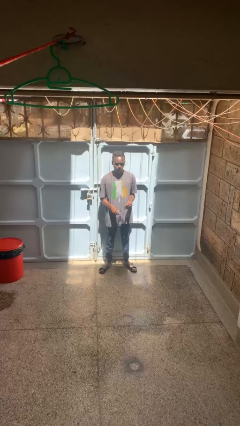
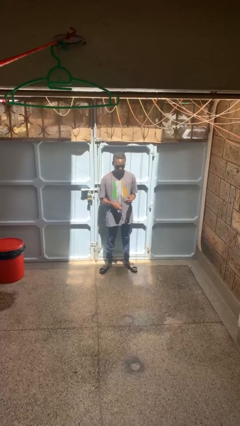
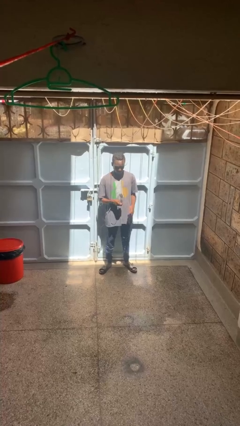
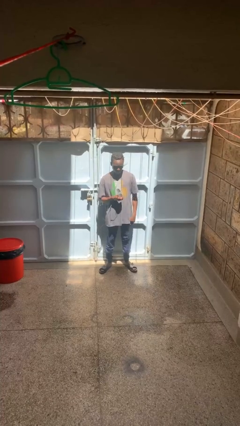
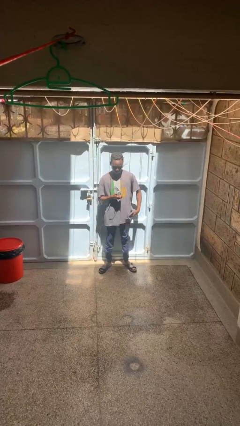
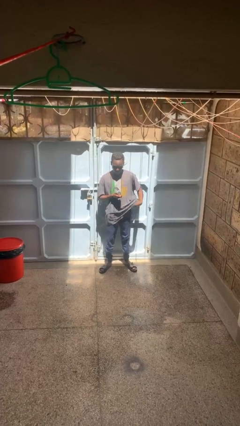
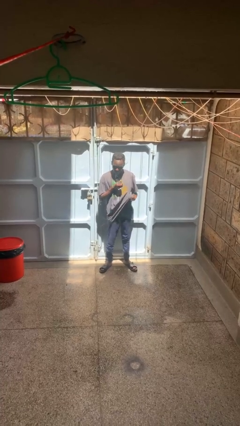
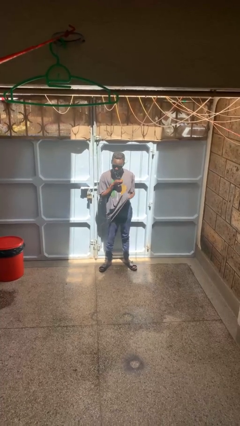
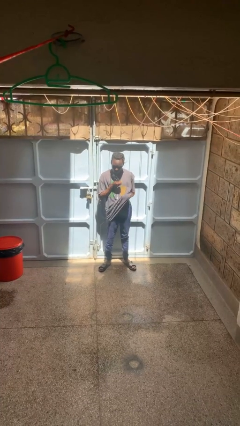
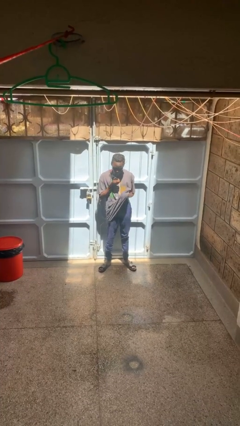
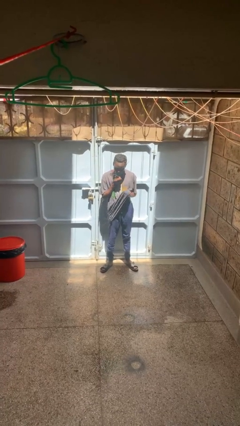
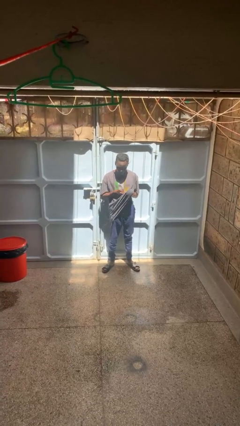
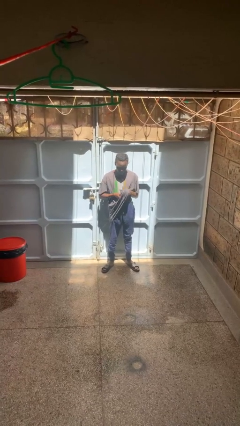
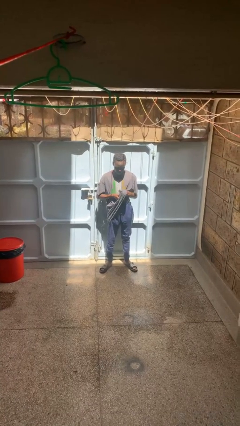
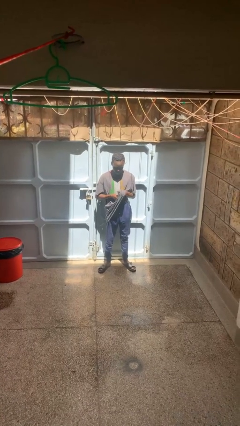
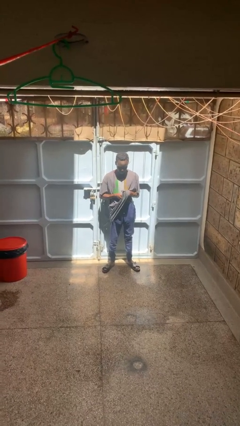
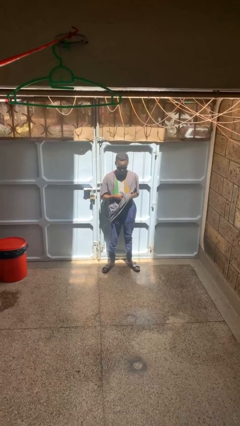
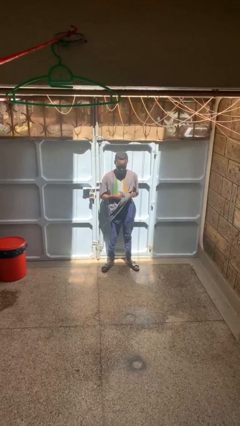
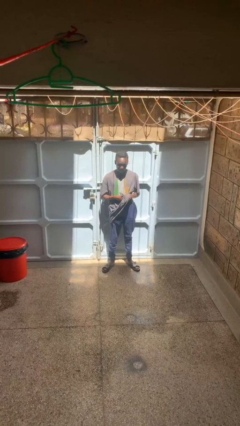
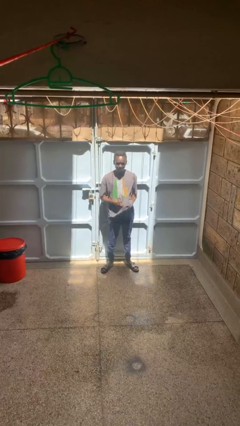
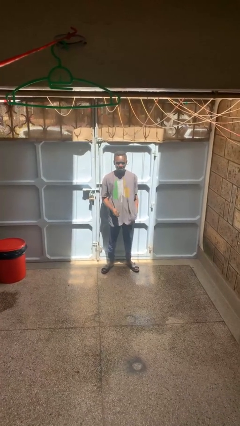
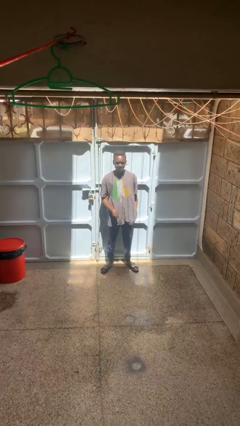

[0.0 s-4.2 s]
person cleans eyeglasses

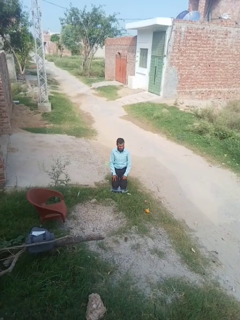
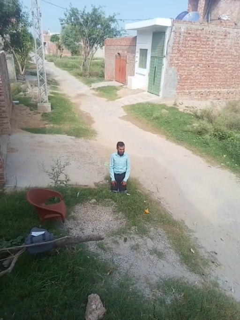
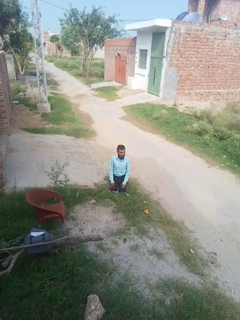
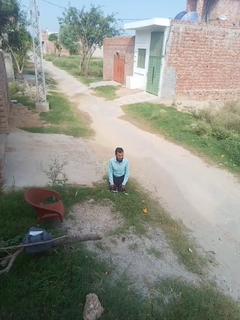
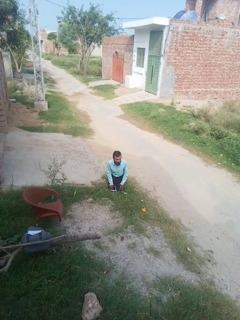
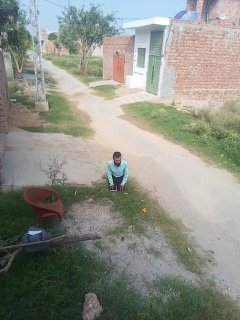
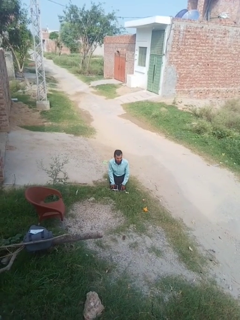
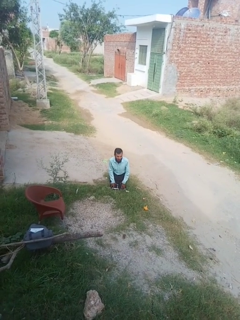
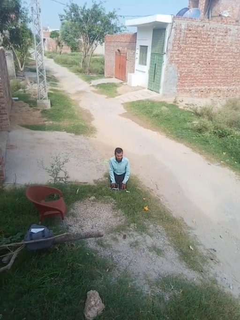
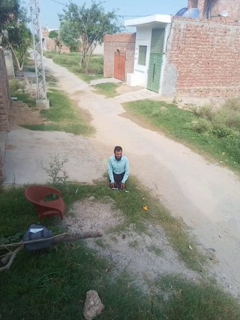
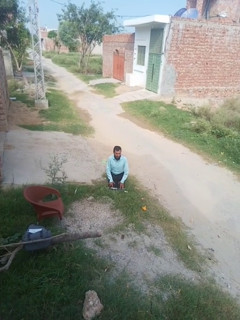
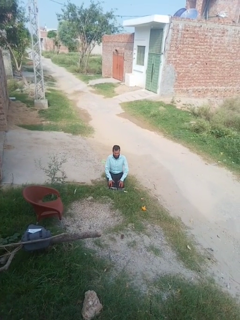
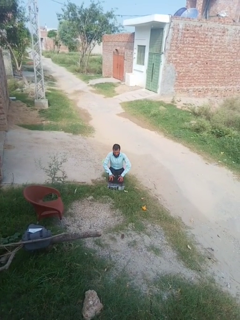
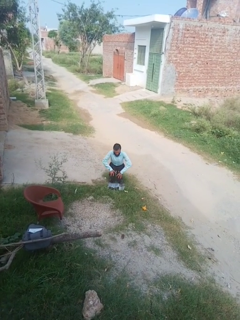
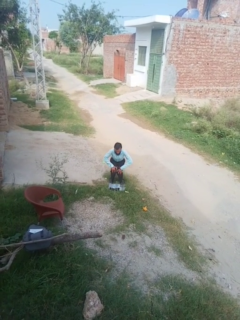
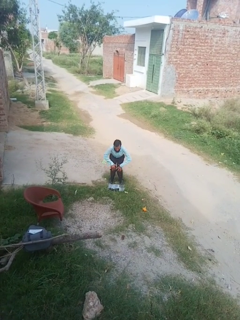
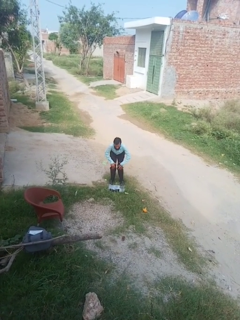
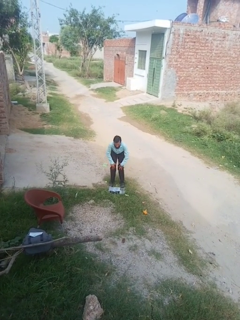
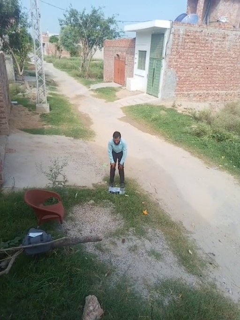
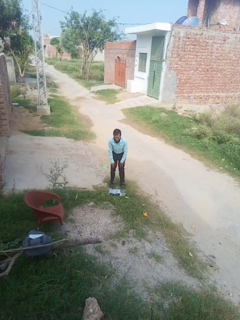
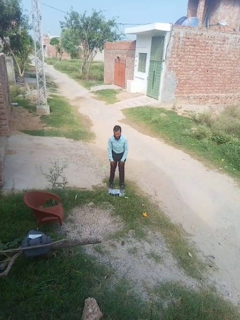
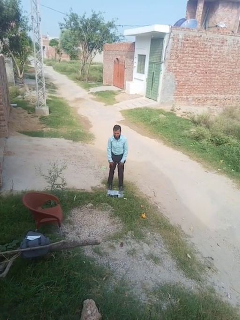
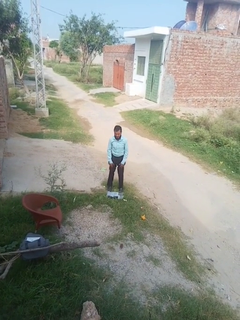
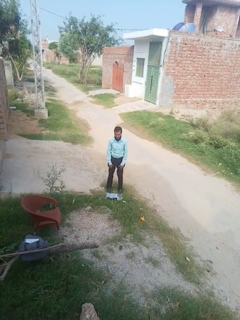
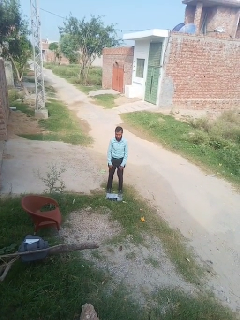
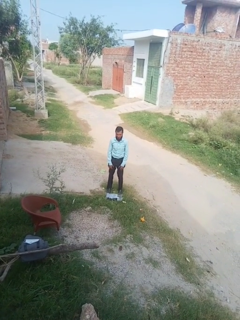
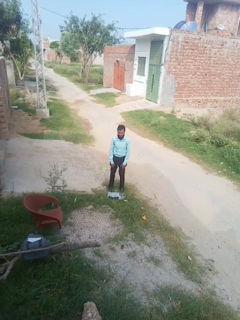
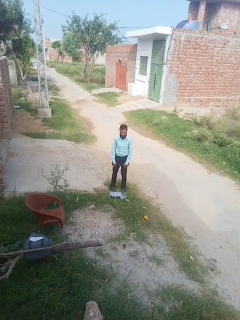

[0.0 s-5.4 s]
person stands up from floor

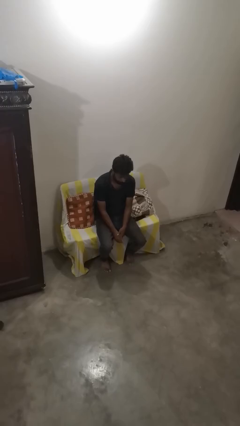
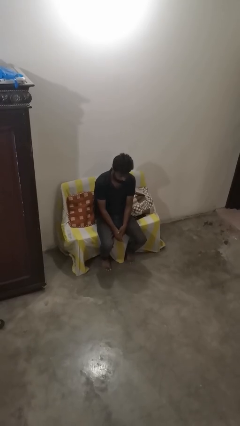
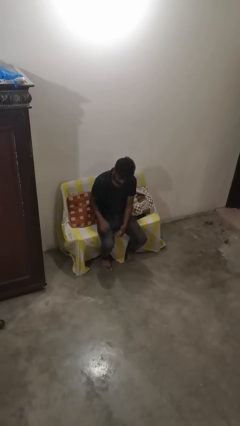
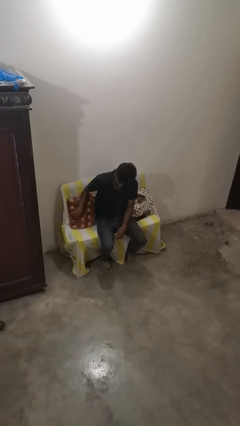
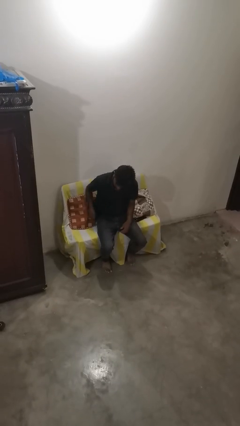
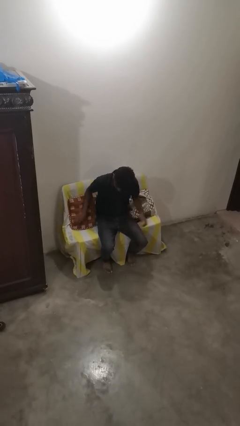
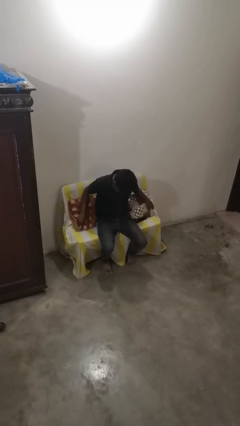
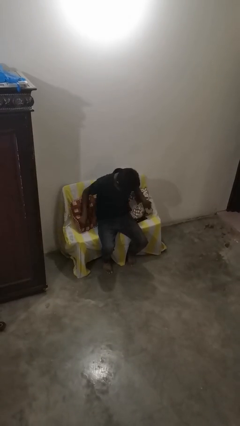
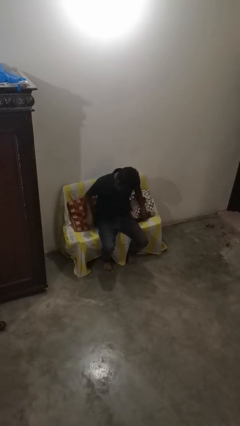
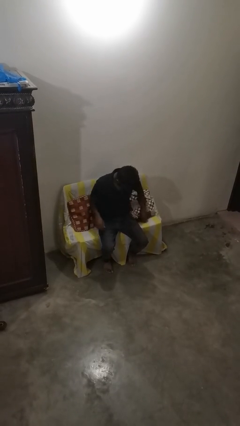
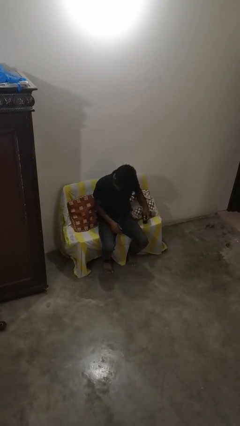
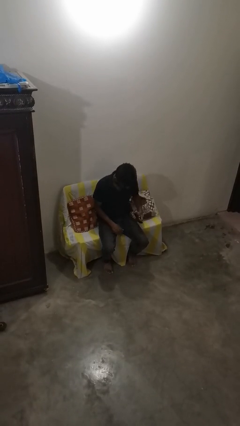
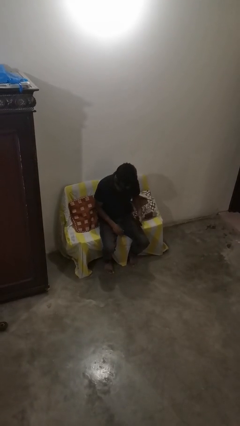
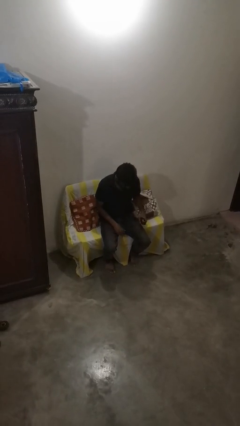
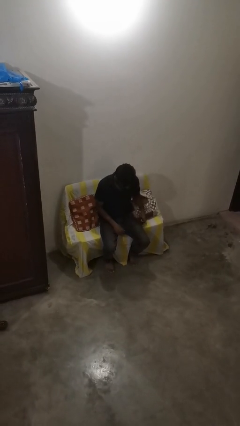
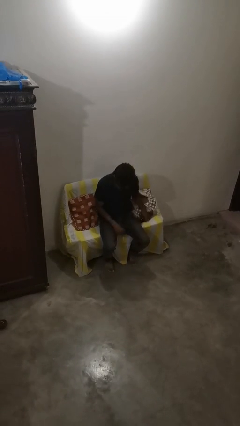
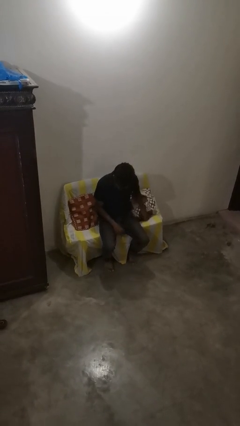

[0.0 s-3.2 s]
person searches in couch

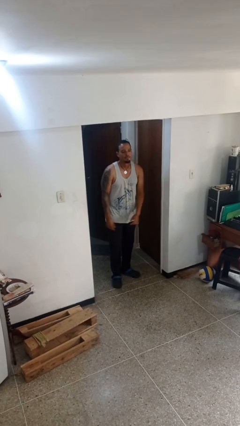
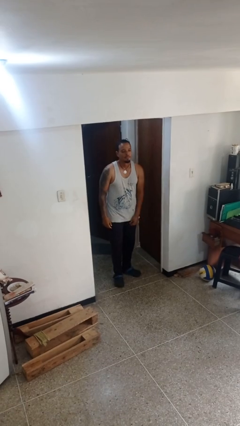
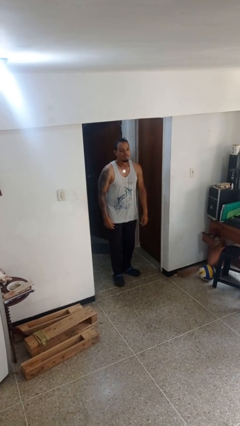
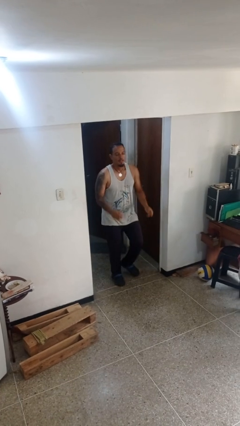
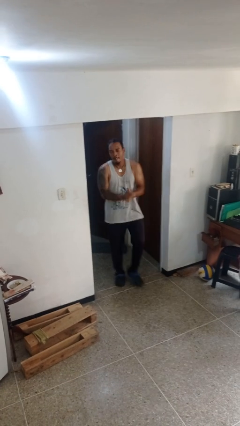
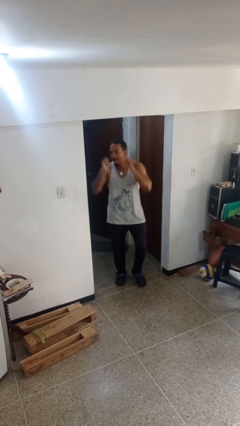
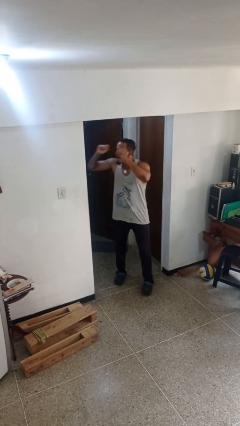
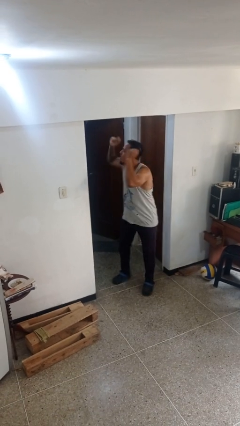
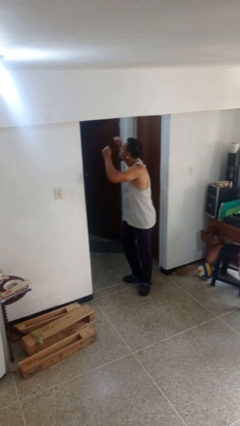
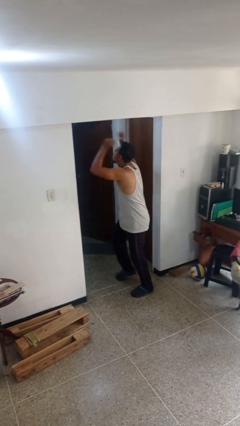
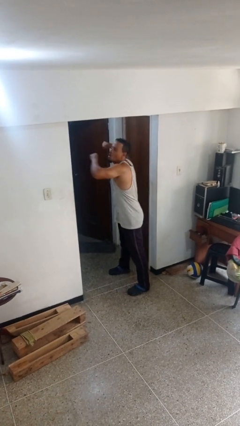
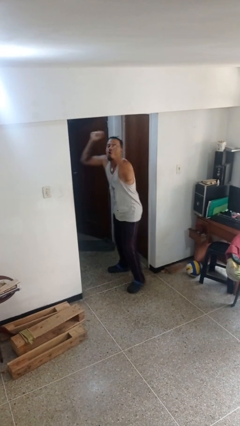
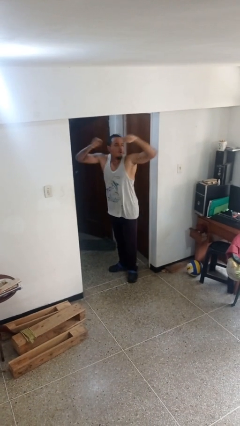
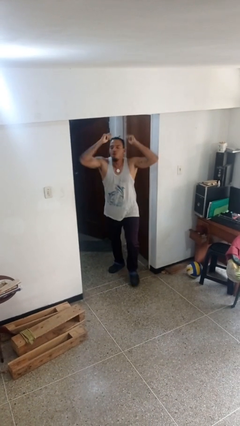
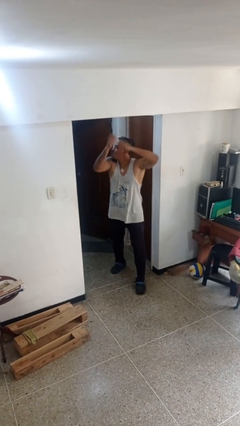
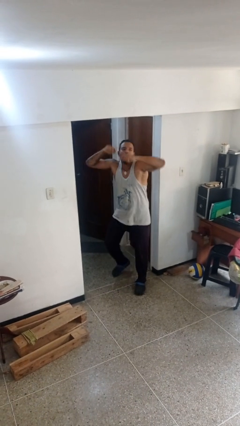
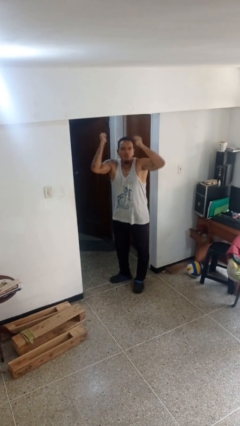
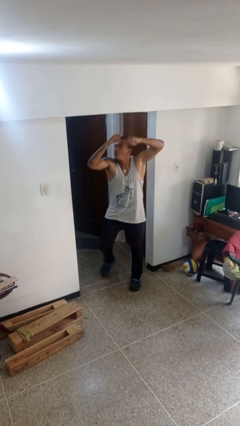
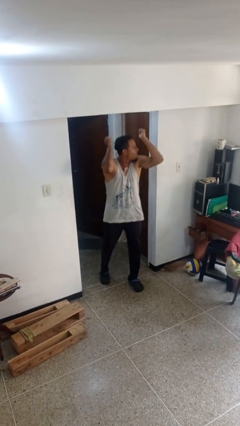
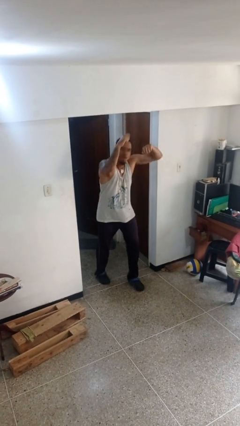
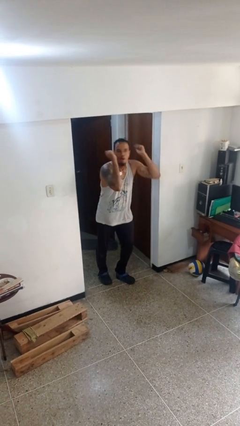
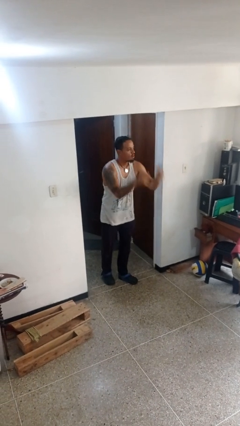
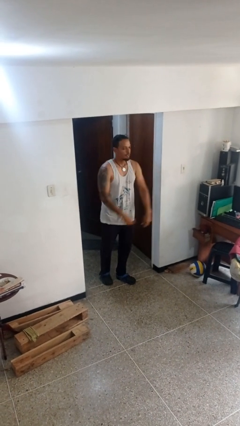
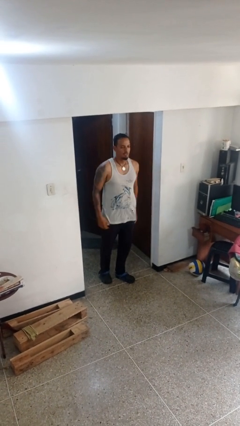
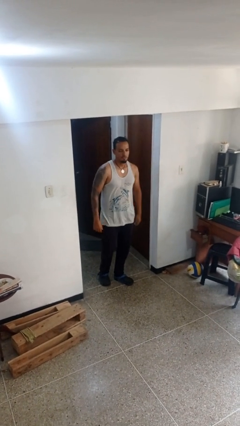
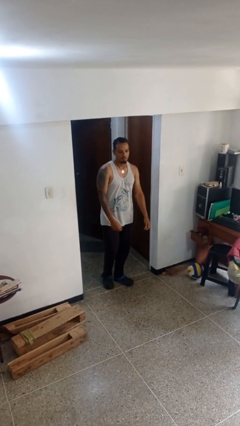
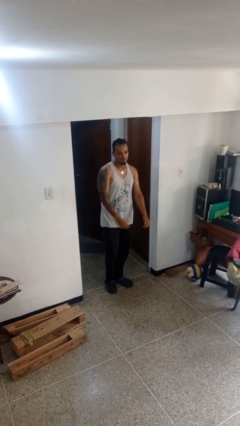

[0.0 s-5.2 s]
person dances in place

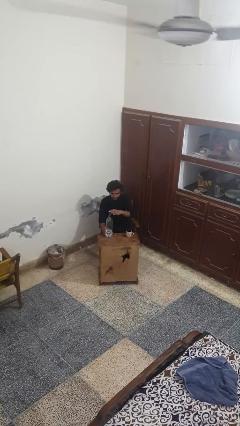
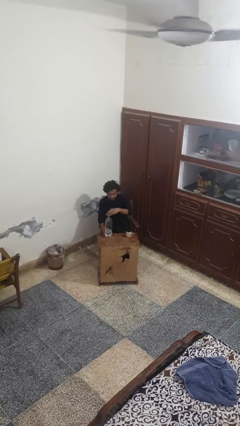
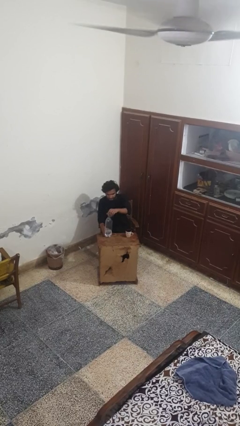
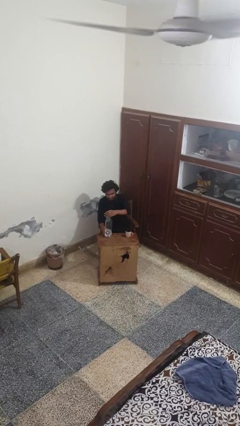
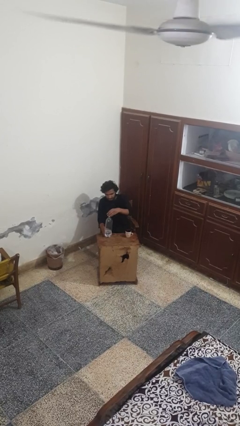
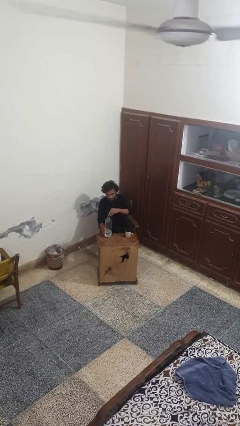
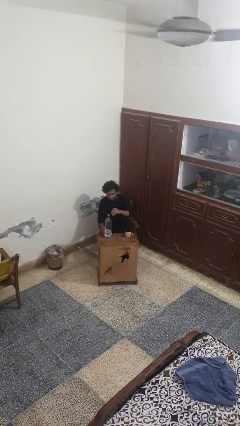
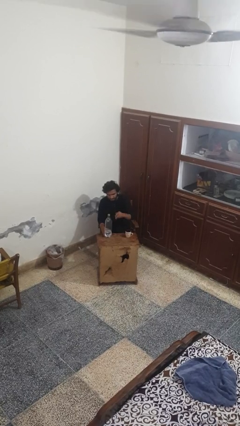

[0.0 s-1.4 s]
person unscrews lid from bottle
